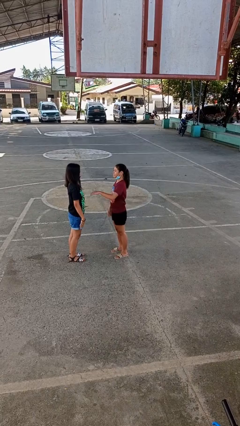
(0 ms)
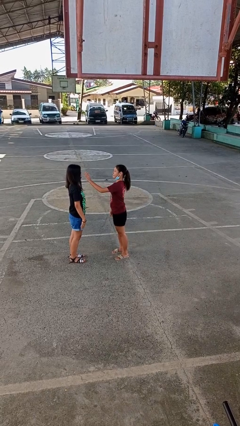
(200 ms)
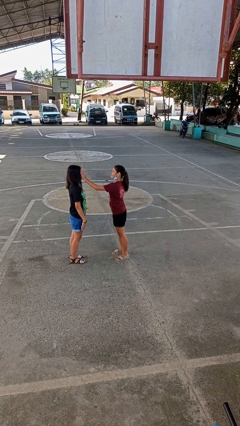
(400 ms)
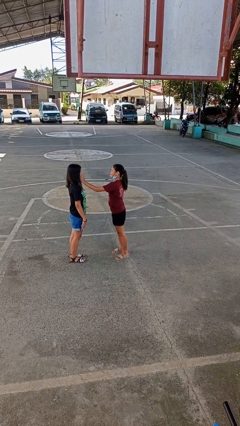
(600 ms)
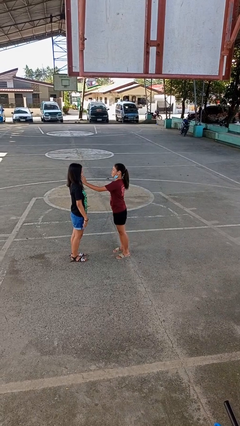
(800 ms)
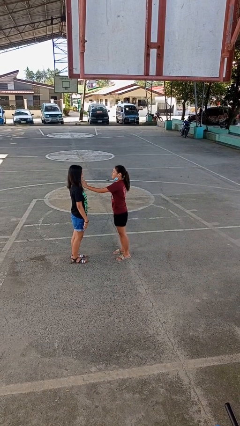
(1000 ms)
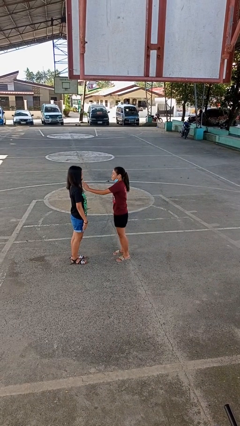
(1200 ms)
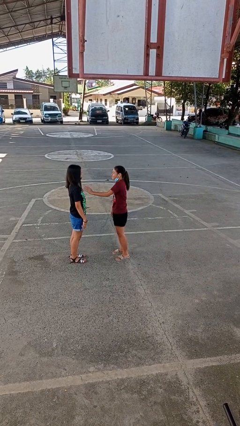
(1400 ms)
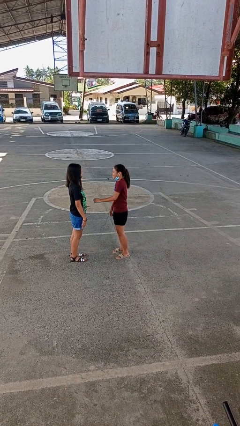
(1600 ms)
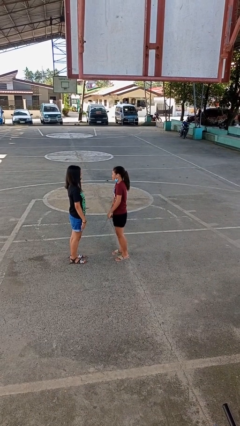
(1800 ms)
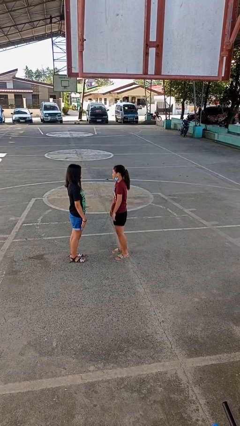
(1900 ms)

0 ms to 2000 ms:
person touches face of person

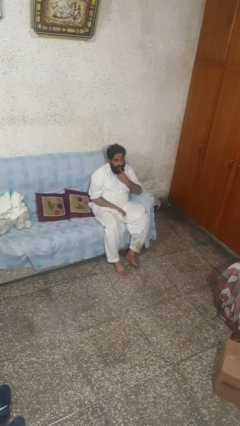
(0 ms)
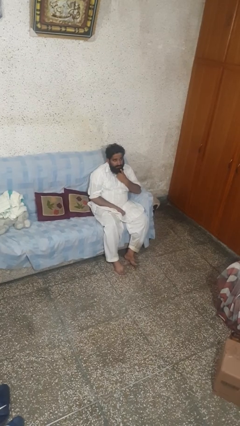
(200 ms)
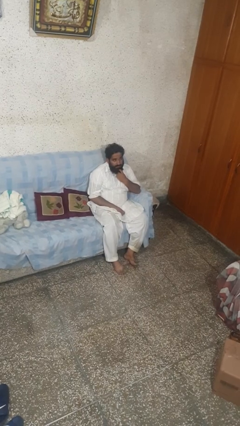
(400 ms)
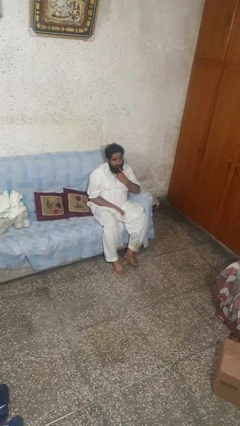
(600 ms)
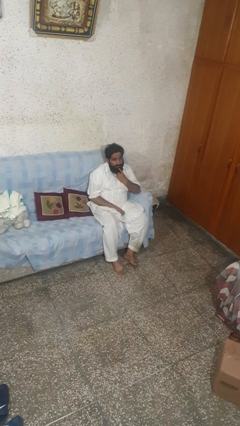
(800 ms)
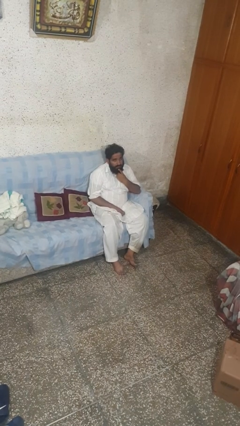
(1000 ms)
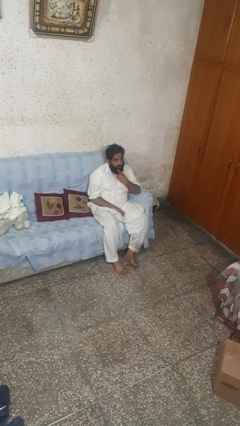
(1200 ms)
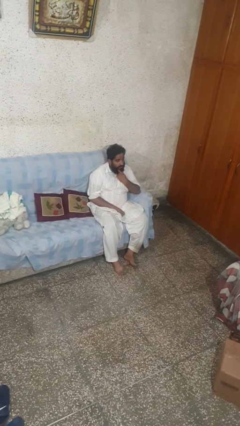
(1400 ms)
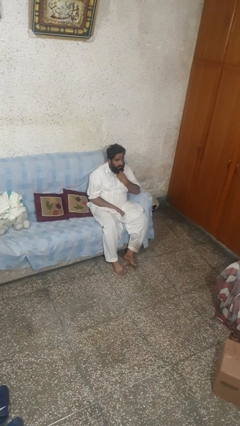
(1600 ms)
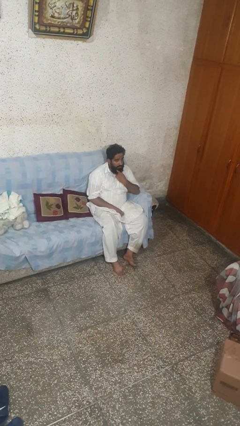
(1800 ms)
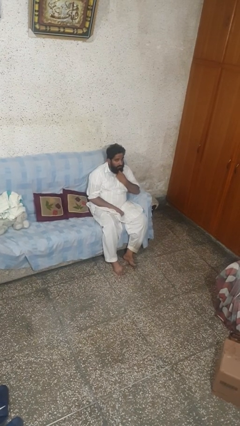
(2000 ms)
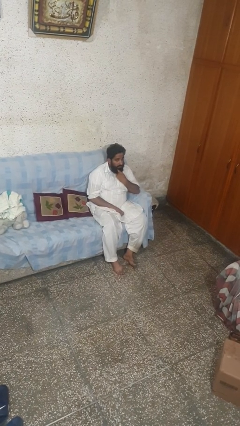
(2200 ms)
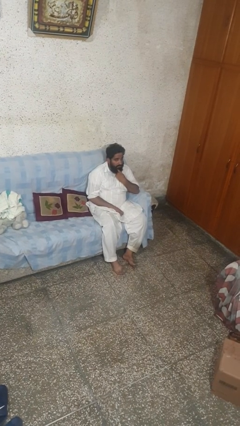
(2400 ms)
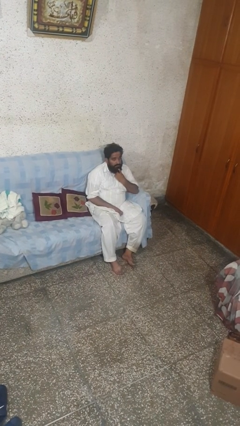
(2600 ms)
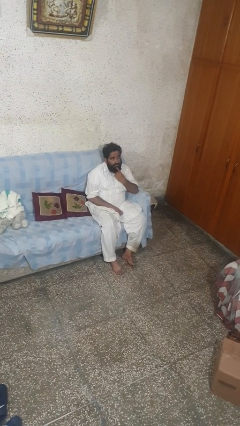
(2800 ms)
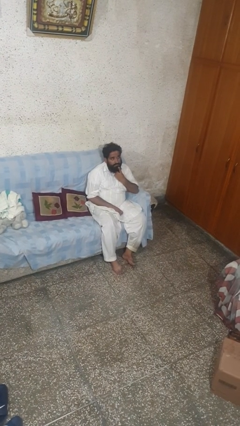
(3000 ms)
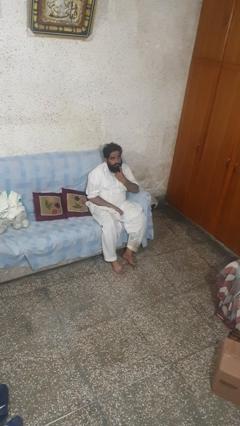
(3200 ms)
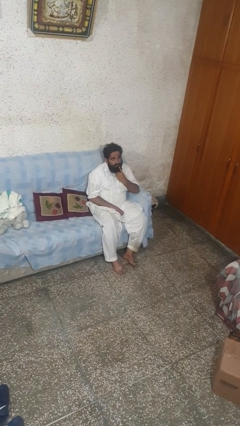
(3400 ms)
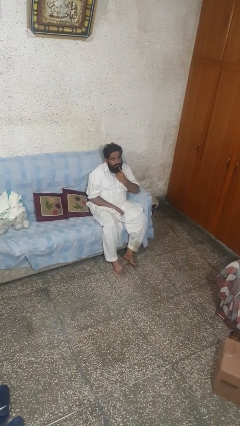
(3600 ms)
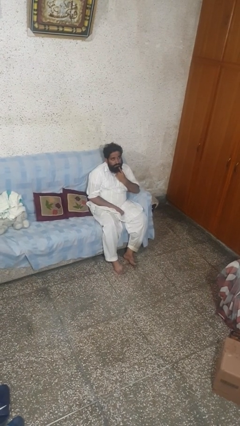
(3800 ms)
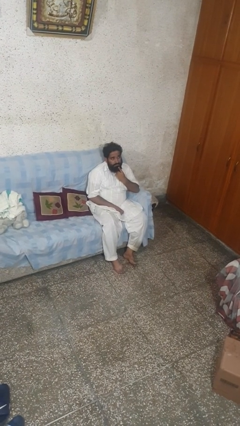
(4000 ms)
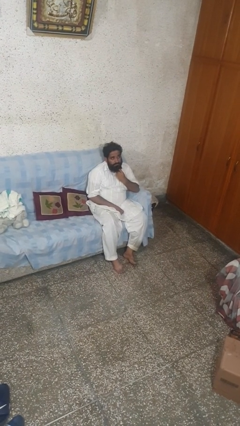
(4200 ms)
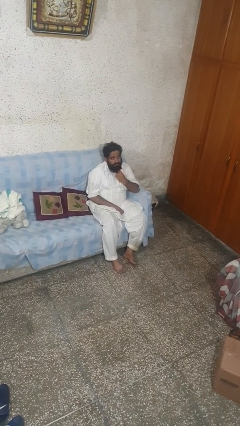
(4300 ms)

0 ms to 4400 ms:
person strokes chin

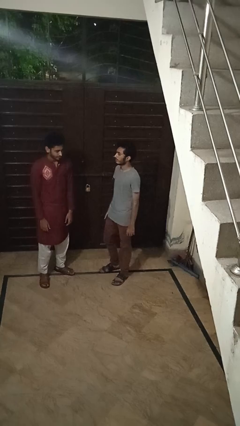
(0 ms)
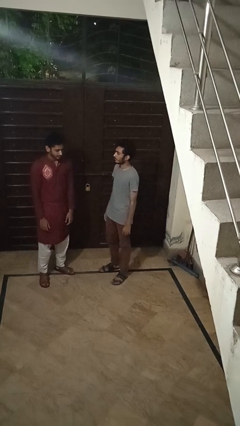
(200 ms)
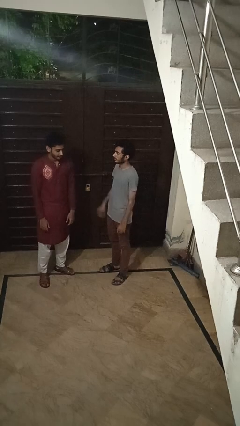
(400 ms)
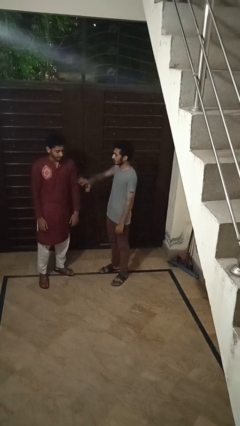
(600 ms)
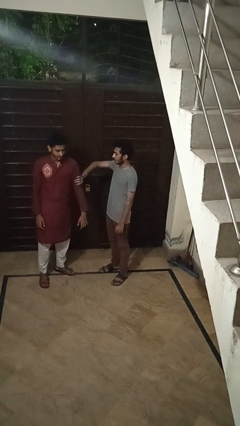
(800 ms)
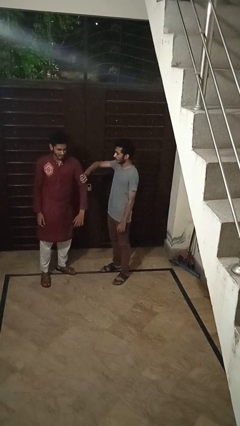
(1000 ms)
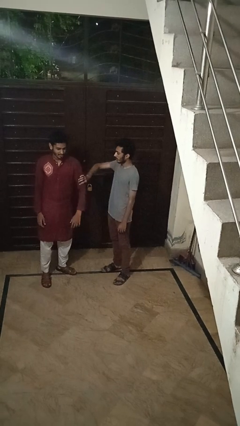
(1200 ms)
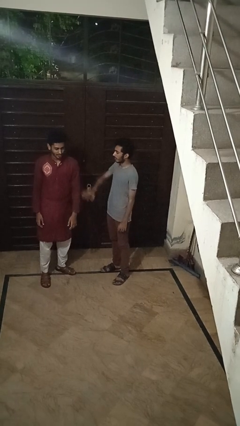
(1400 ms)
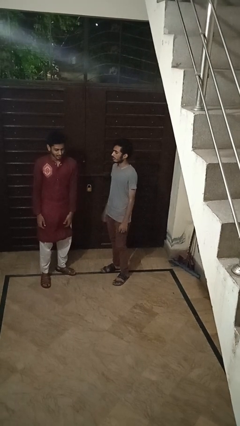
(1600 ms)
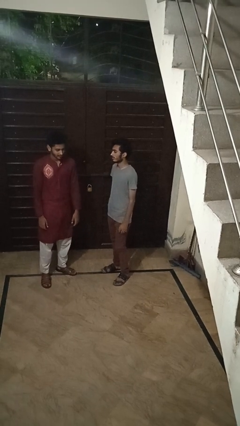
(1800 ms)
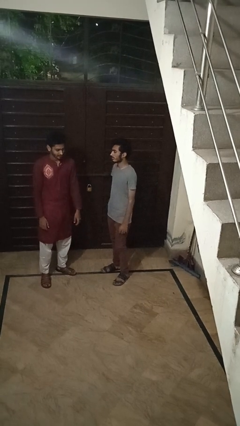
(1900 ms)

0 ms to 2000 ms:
person grabs person by bicep

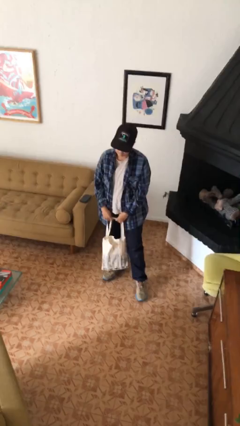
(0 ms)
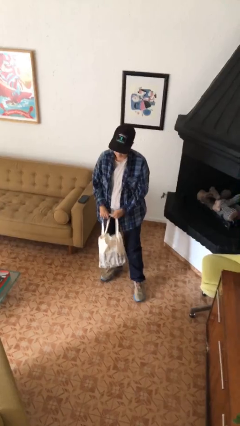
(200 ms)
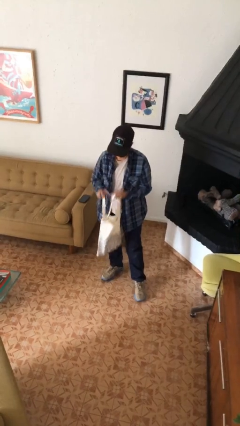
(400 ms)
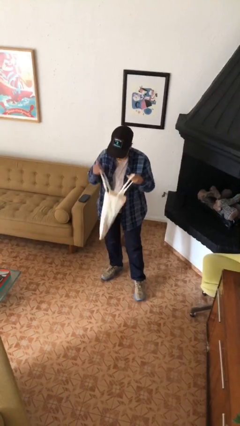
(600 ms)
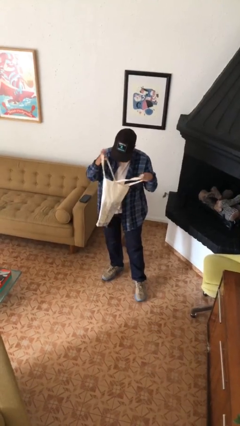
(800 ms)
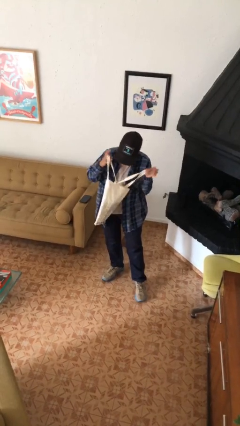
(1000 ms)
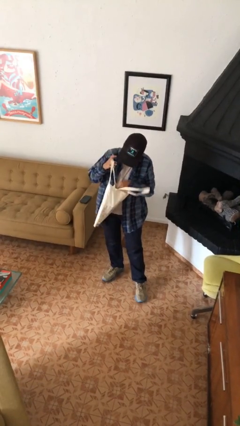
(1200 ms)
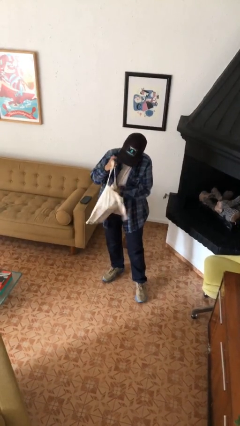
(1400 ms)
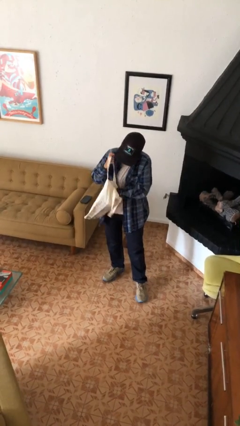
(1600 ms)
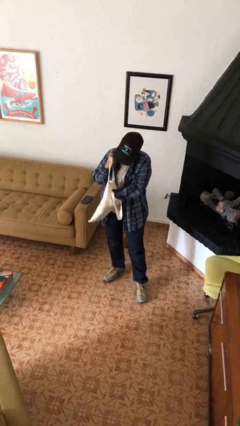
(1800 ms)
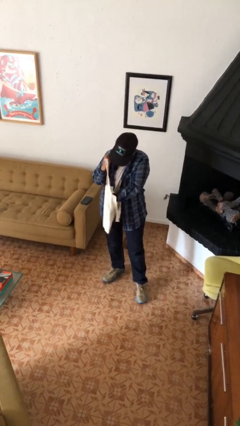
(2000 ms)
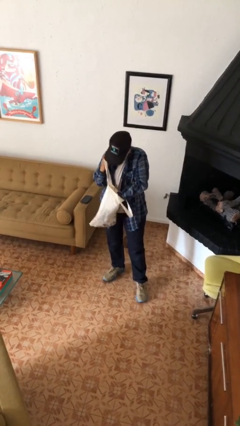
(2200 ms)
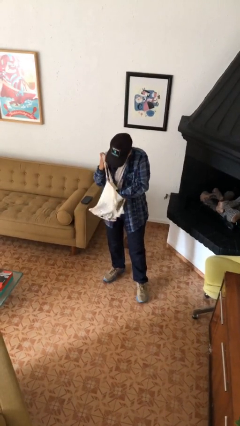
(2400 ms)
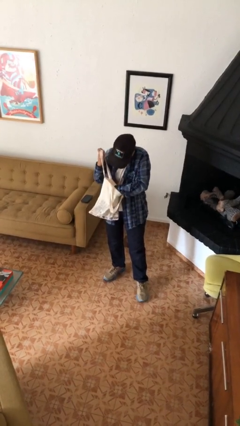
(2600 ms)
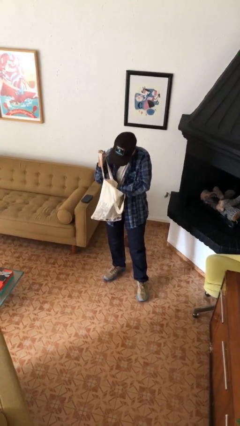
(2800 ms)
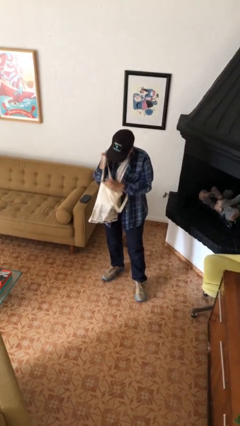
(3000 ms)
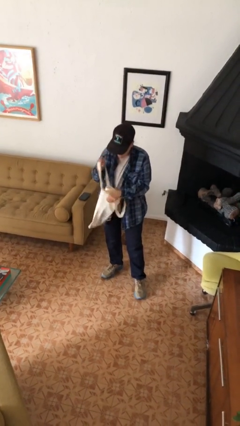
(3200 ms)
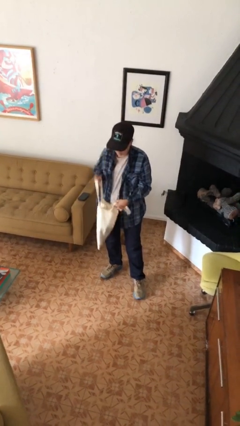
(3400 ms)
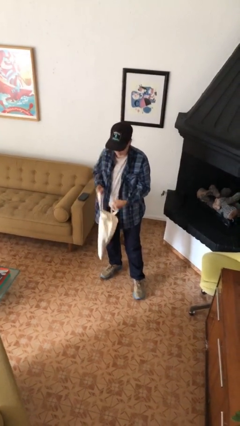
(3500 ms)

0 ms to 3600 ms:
person searches in bag

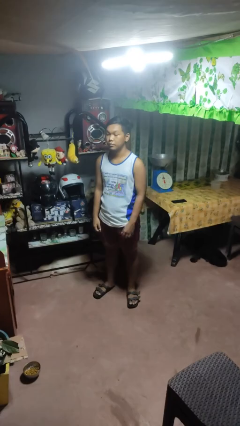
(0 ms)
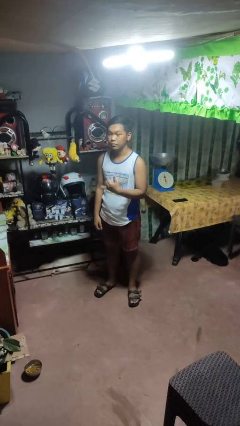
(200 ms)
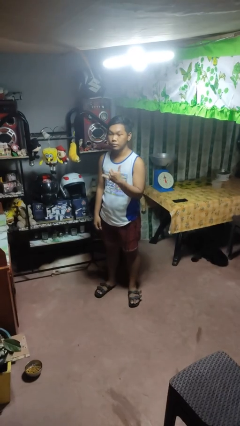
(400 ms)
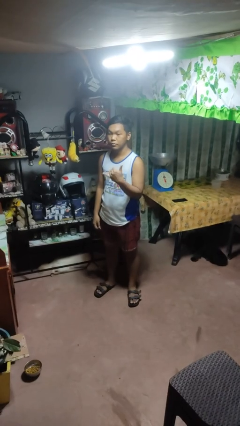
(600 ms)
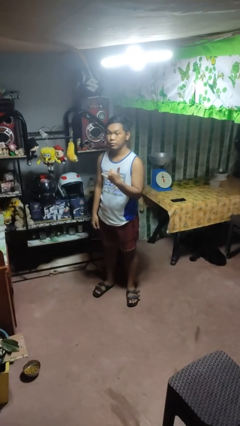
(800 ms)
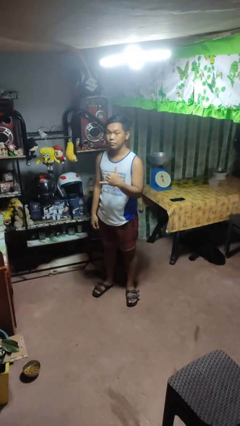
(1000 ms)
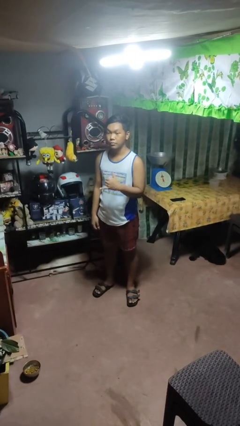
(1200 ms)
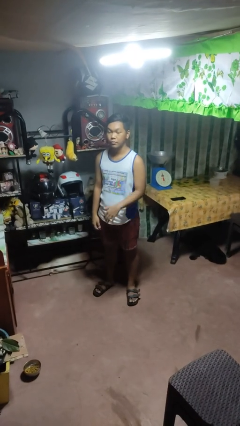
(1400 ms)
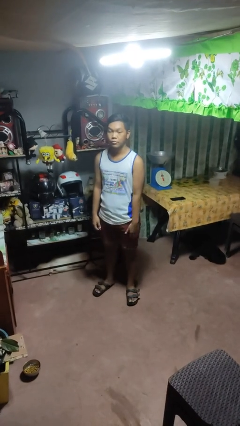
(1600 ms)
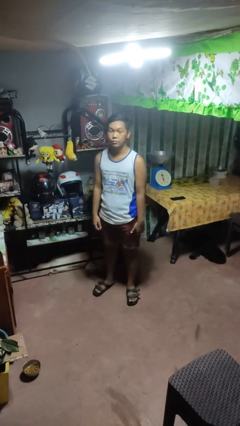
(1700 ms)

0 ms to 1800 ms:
person gestures hang loose

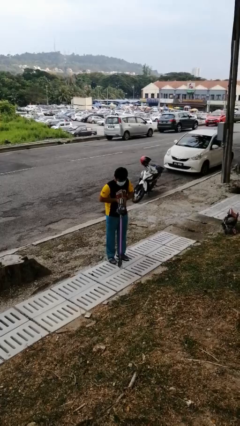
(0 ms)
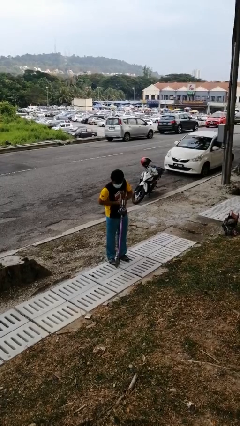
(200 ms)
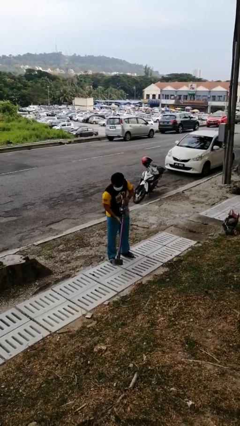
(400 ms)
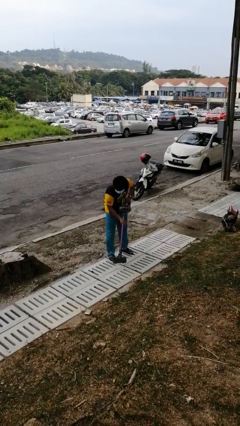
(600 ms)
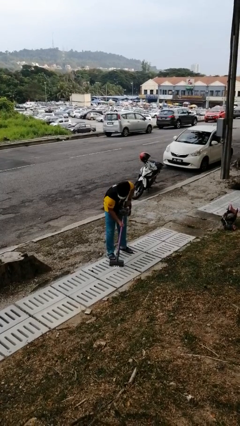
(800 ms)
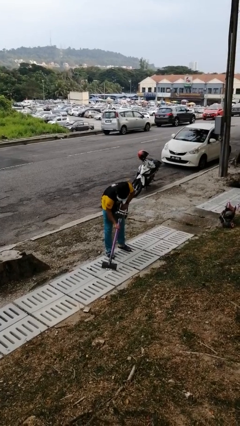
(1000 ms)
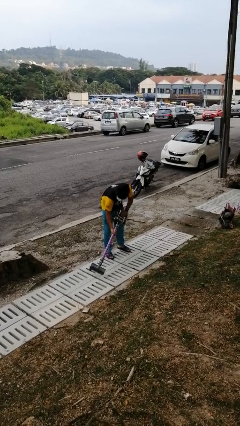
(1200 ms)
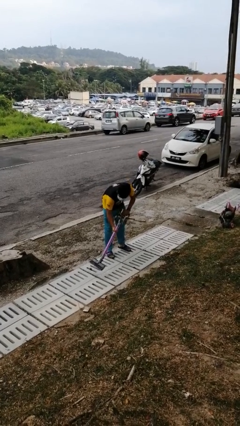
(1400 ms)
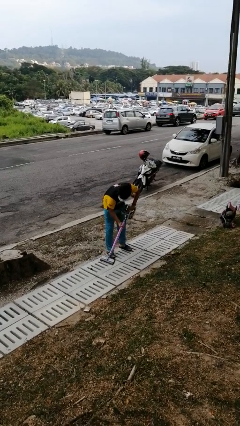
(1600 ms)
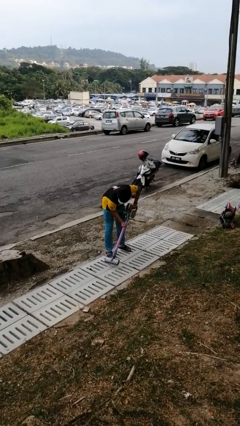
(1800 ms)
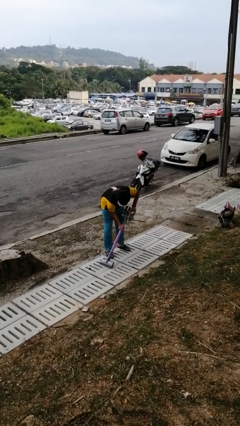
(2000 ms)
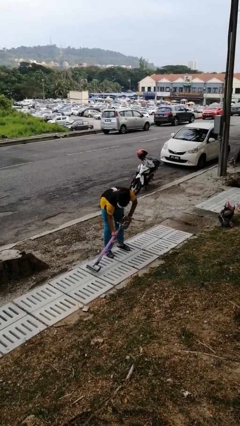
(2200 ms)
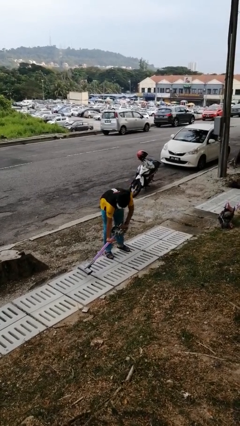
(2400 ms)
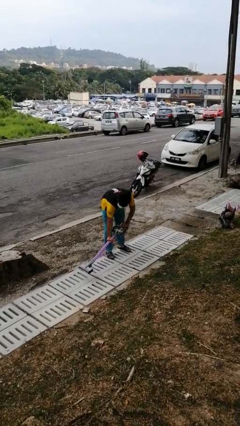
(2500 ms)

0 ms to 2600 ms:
person vacuums carpet

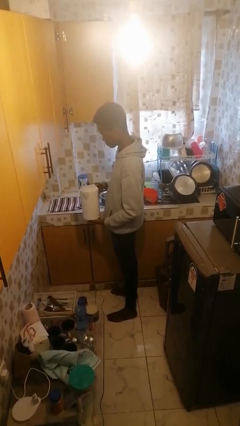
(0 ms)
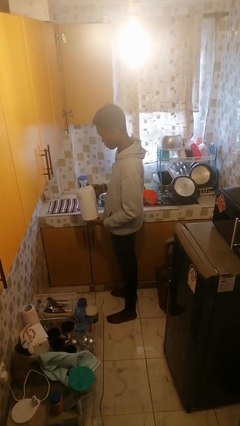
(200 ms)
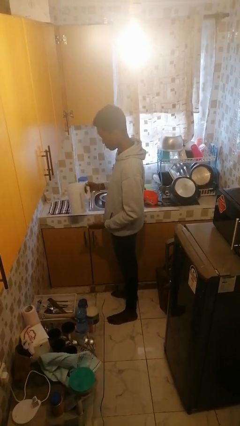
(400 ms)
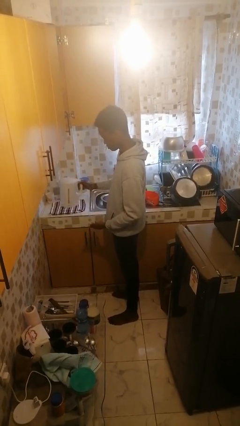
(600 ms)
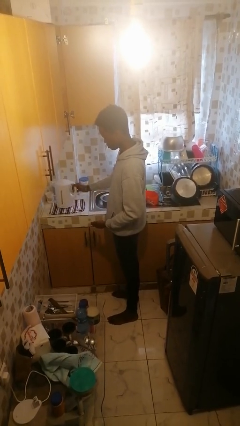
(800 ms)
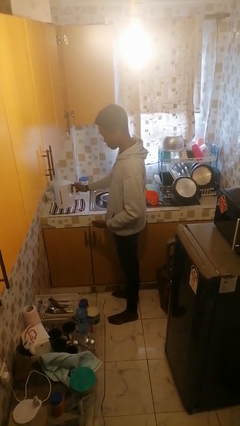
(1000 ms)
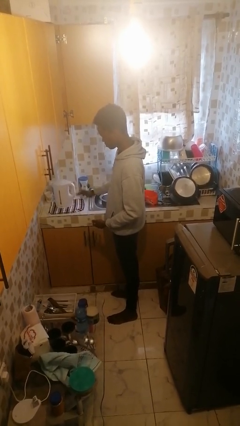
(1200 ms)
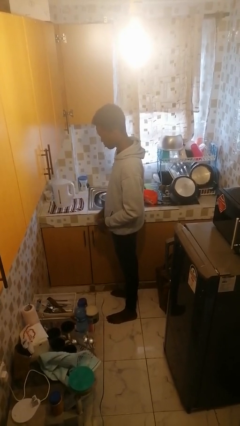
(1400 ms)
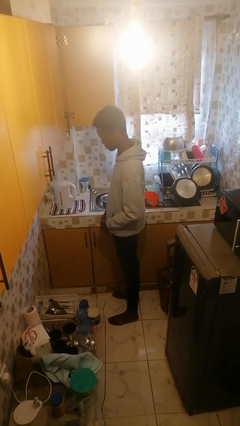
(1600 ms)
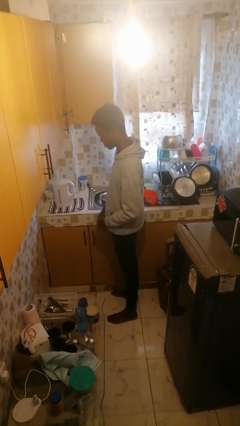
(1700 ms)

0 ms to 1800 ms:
person puts down object on countertop
